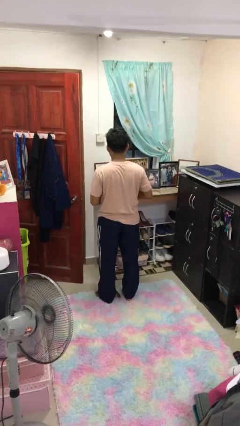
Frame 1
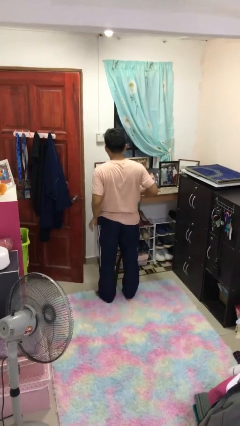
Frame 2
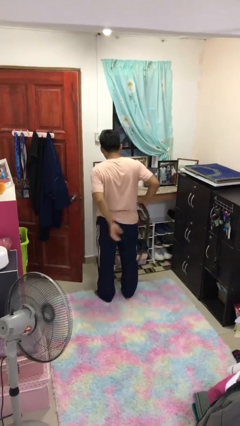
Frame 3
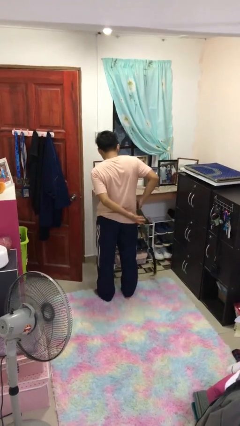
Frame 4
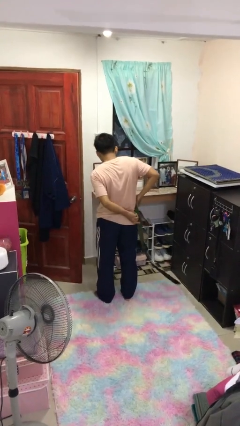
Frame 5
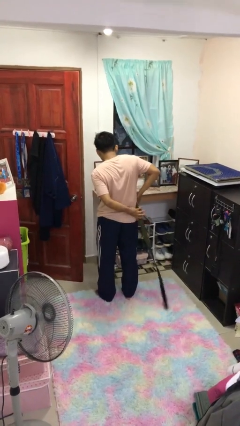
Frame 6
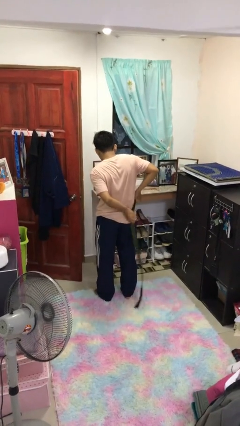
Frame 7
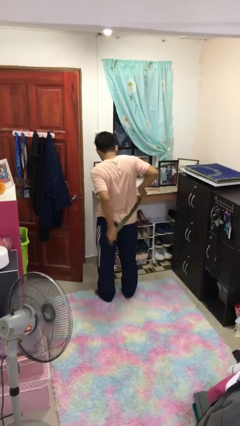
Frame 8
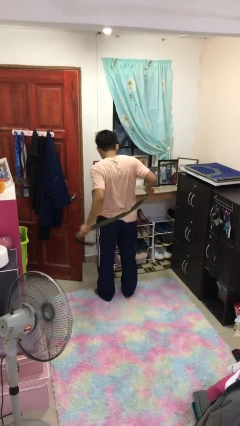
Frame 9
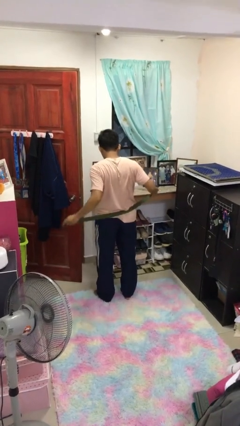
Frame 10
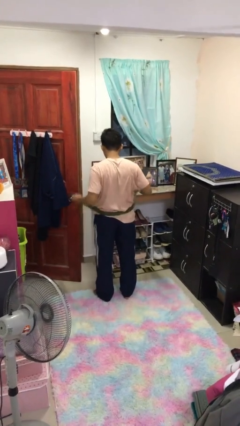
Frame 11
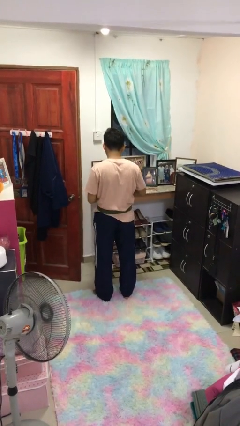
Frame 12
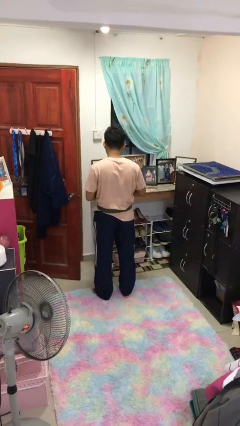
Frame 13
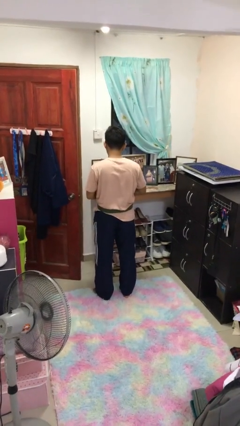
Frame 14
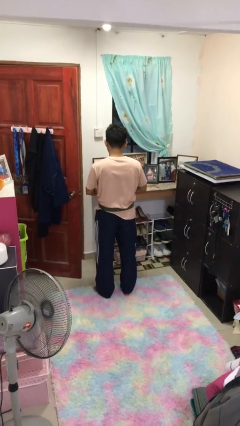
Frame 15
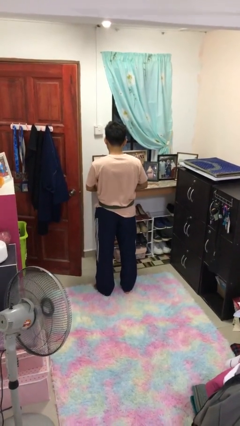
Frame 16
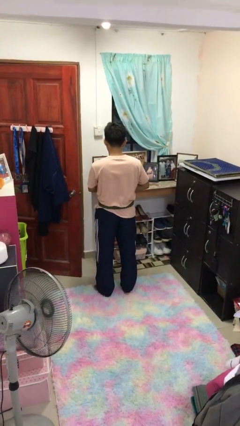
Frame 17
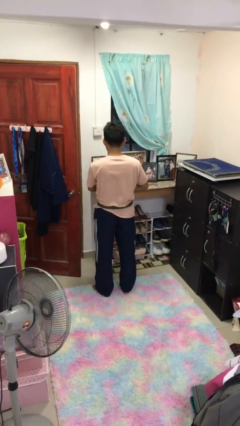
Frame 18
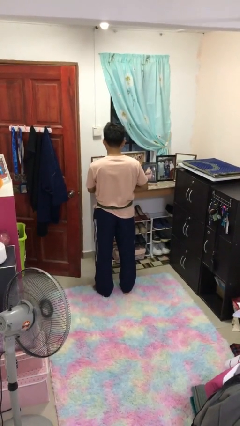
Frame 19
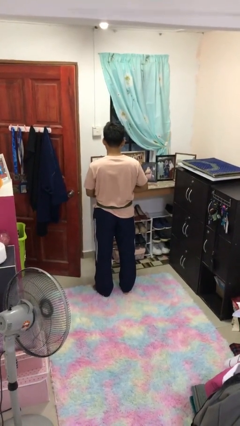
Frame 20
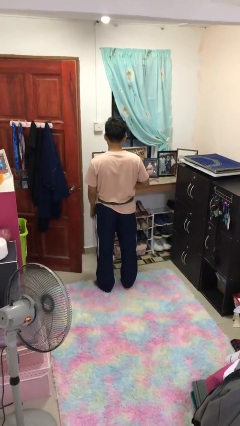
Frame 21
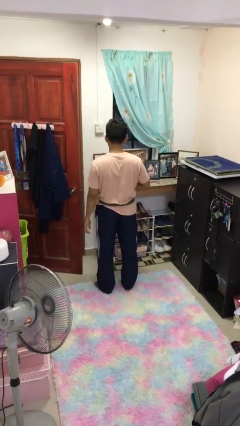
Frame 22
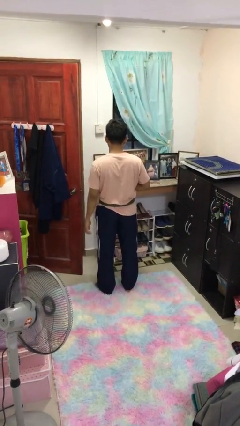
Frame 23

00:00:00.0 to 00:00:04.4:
person puts on belt

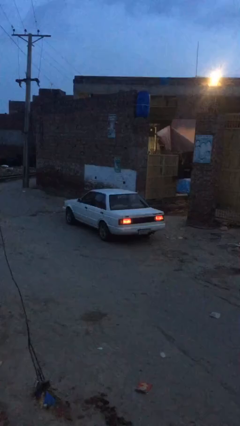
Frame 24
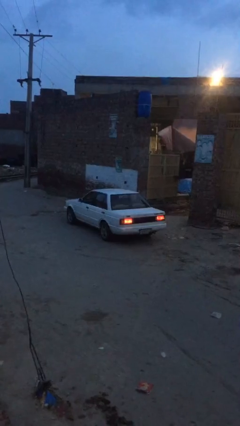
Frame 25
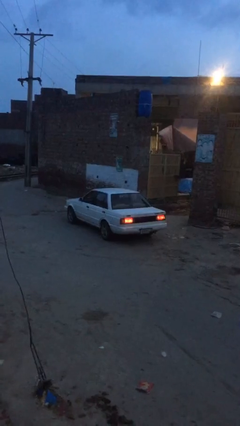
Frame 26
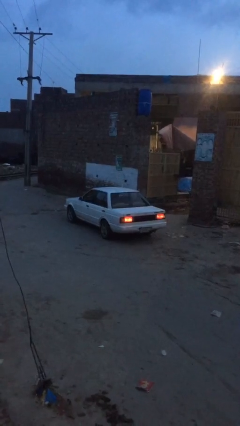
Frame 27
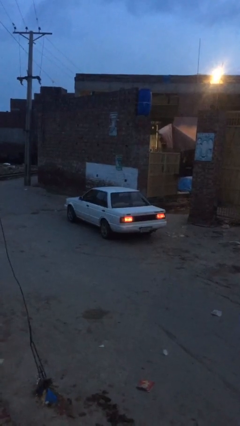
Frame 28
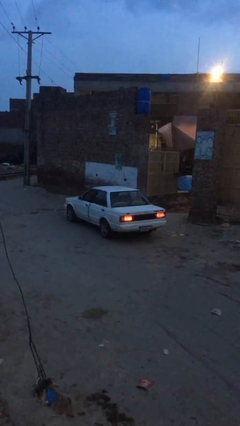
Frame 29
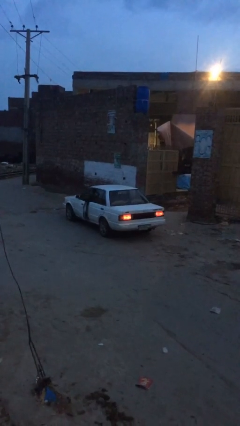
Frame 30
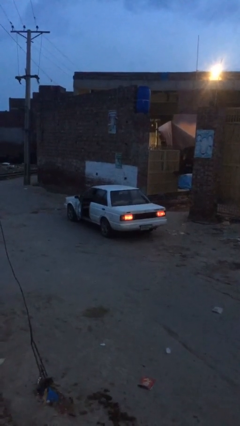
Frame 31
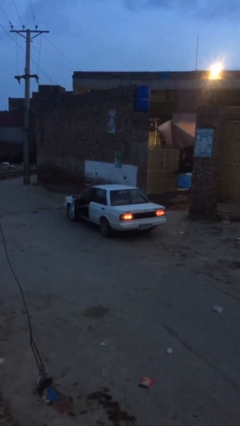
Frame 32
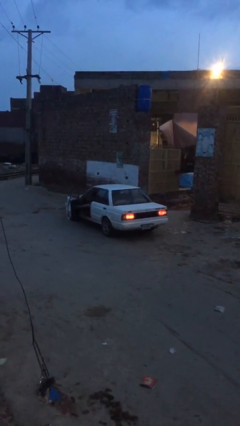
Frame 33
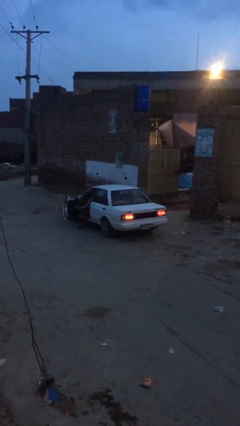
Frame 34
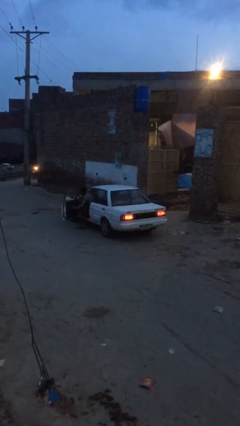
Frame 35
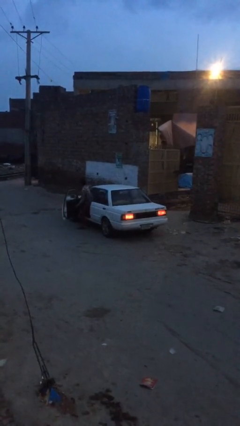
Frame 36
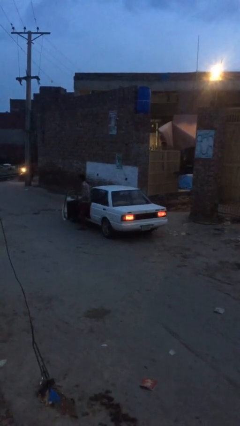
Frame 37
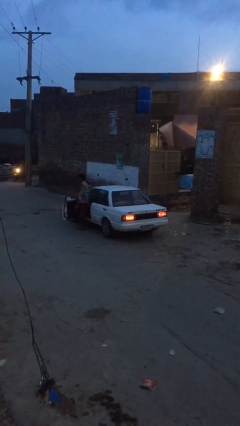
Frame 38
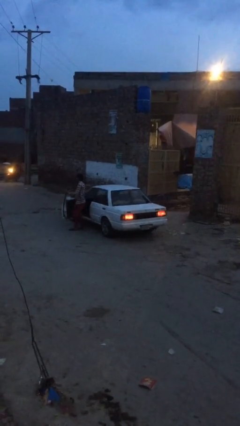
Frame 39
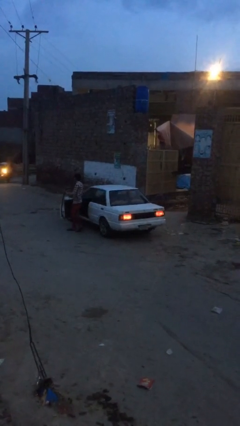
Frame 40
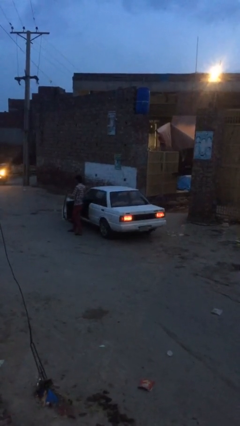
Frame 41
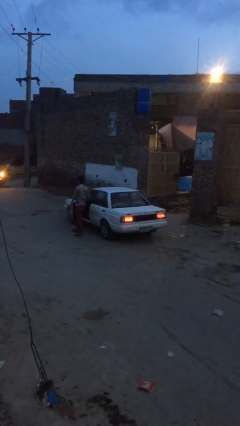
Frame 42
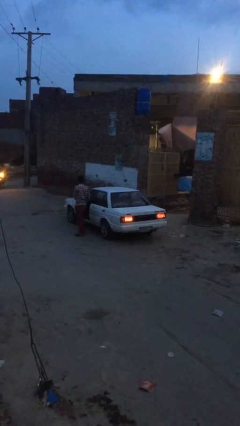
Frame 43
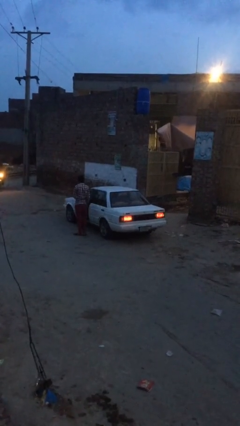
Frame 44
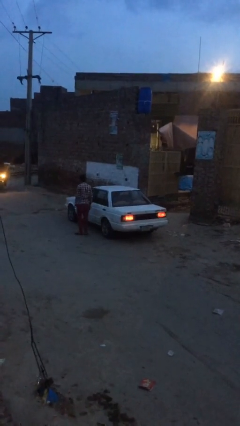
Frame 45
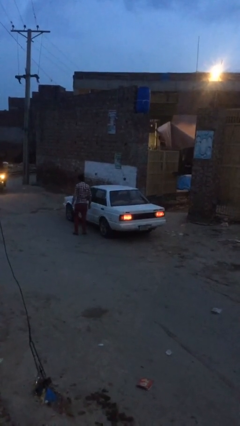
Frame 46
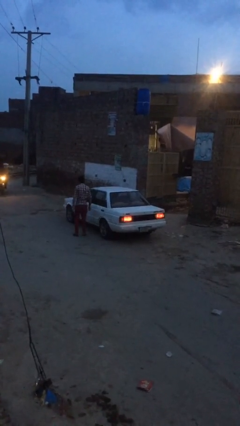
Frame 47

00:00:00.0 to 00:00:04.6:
car drops off person

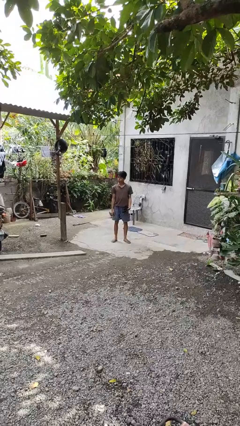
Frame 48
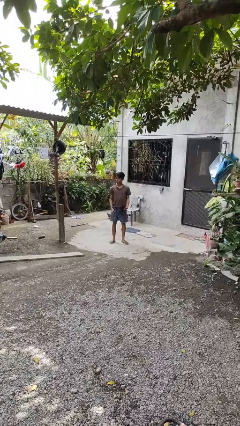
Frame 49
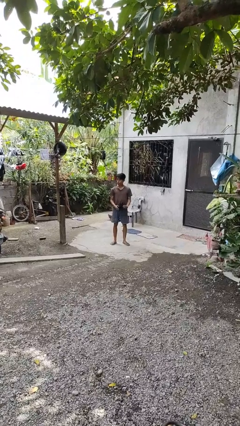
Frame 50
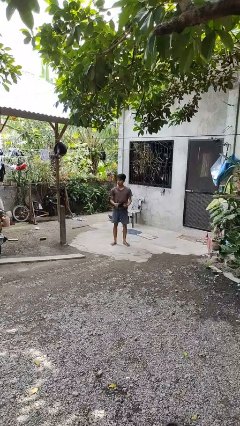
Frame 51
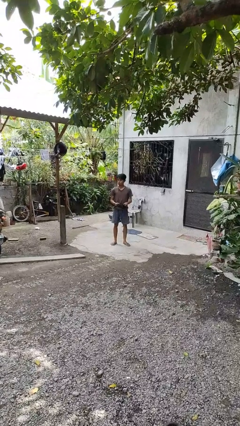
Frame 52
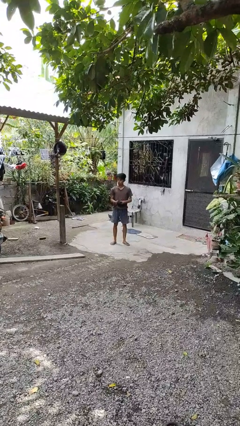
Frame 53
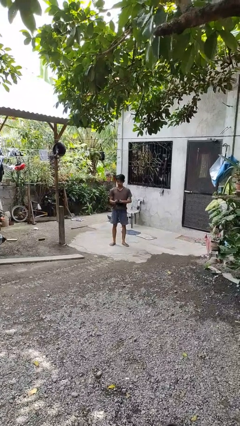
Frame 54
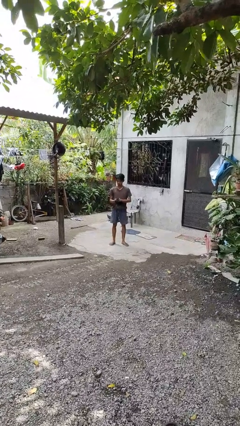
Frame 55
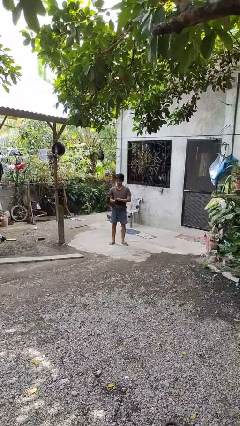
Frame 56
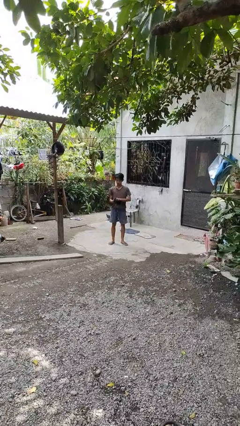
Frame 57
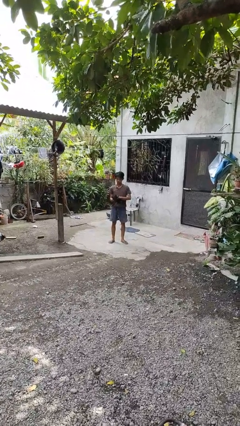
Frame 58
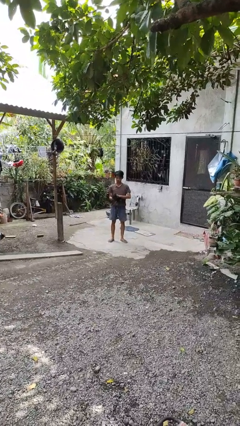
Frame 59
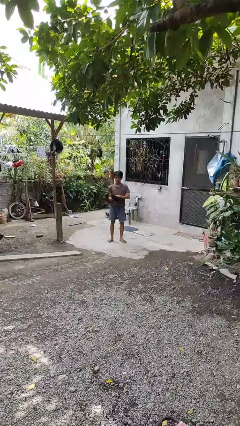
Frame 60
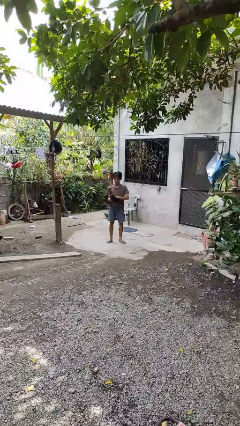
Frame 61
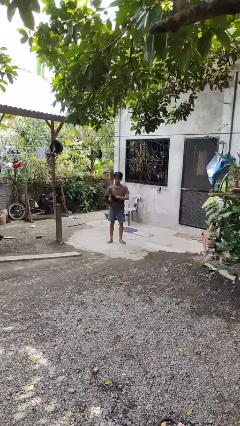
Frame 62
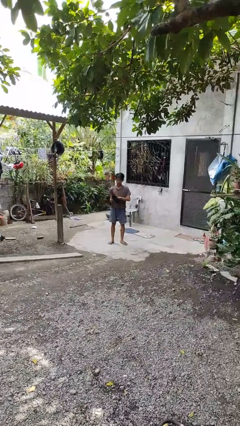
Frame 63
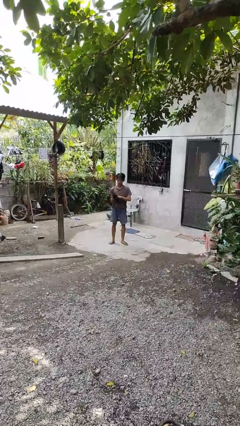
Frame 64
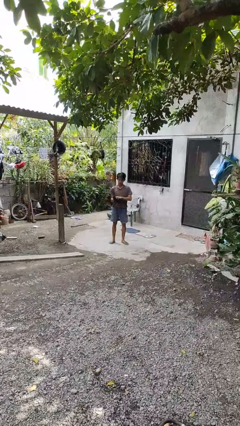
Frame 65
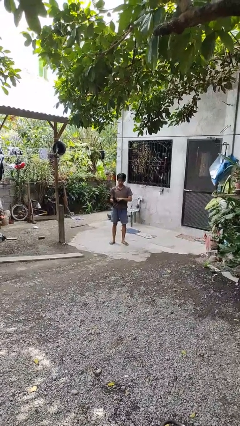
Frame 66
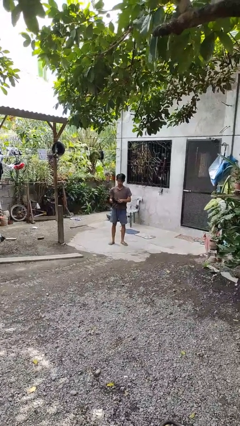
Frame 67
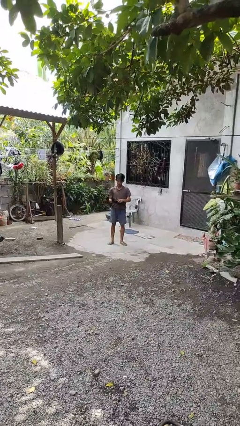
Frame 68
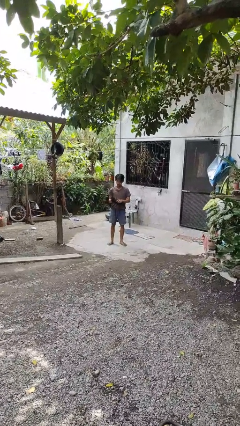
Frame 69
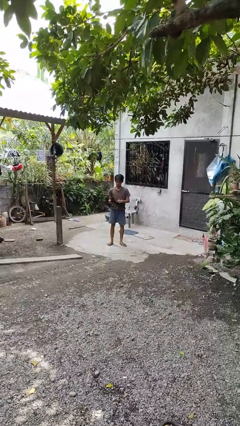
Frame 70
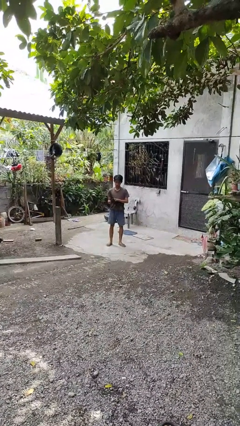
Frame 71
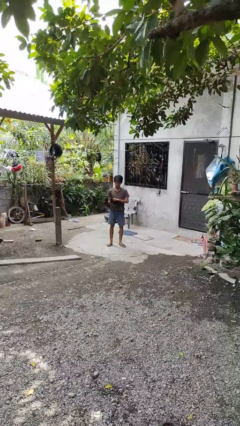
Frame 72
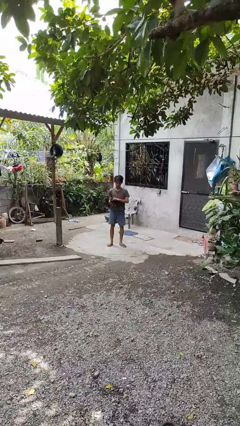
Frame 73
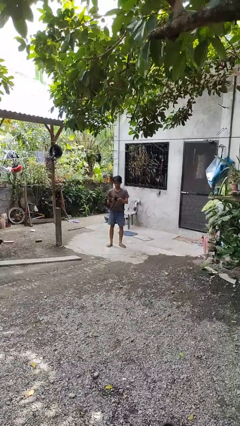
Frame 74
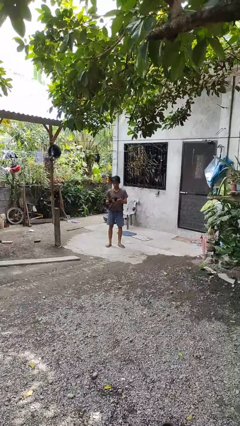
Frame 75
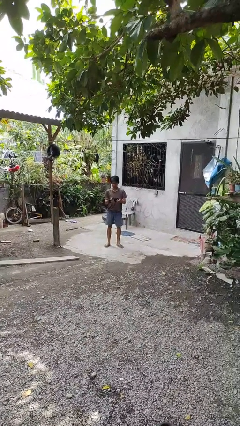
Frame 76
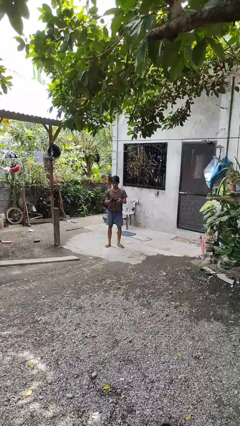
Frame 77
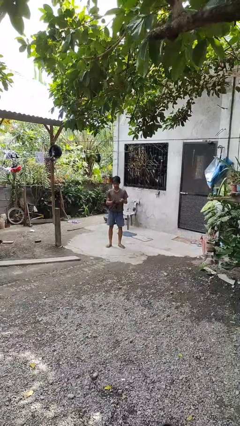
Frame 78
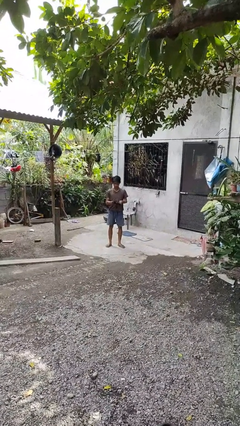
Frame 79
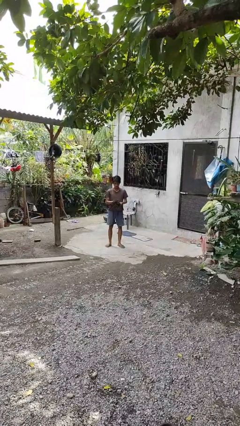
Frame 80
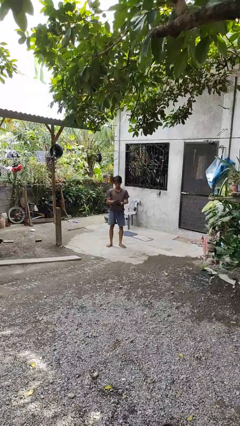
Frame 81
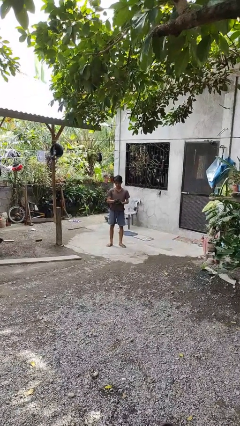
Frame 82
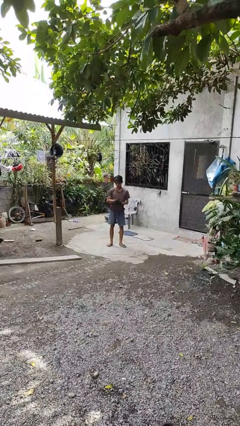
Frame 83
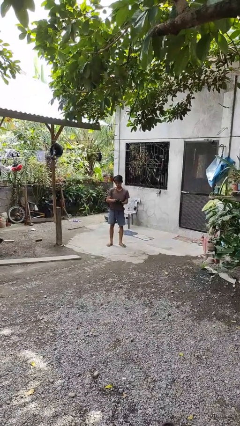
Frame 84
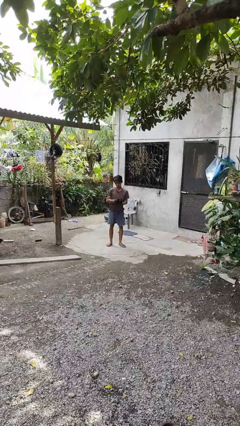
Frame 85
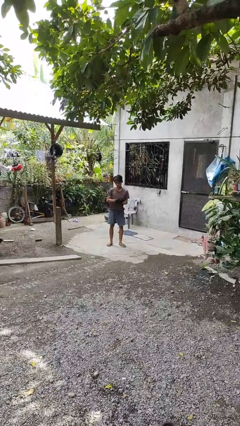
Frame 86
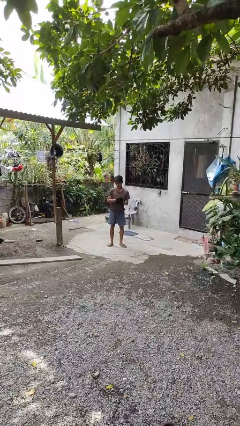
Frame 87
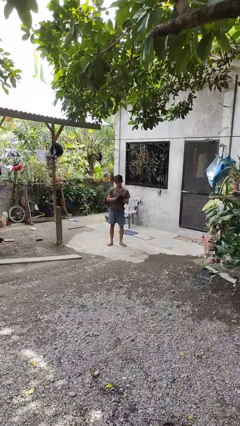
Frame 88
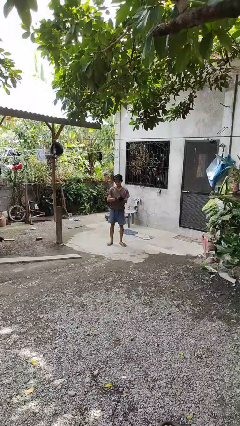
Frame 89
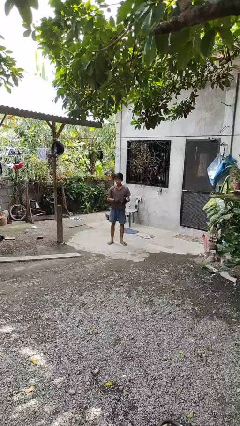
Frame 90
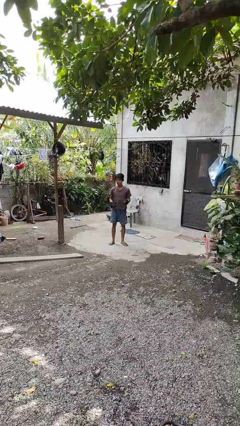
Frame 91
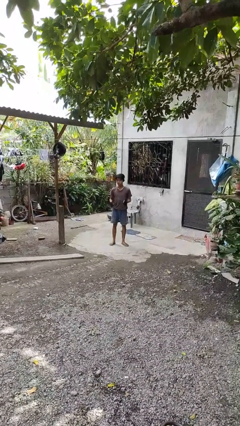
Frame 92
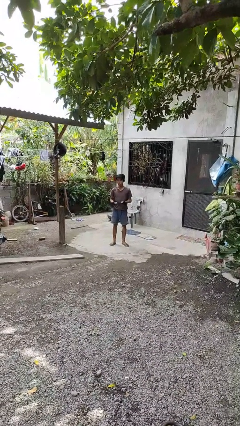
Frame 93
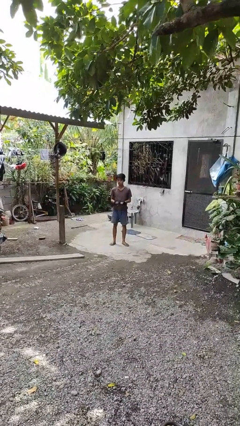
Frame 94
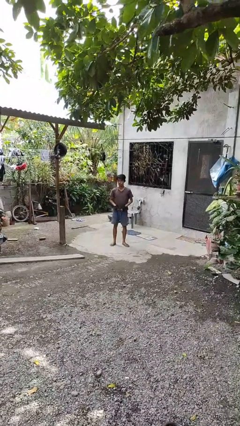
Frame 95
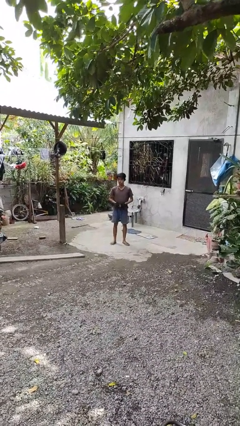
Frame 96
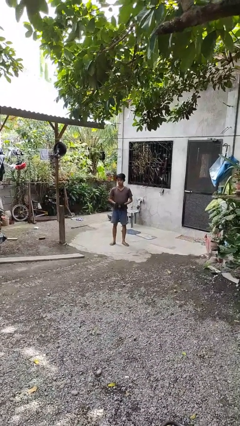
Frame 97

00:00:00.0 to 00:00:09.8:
person puts on gloves
